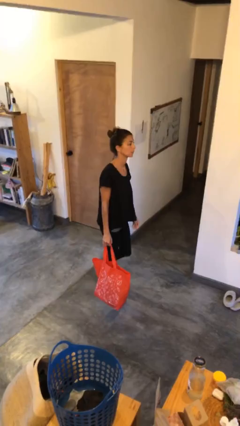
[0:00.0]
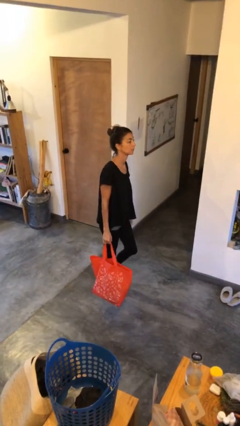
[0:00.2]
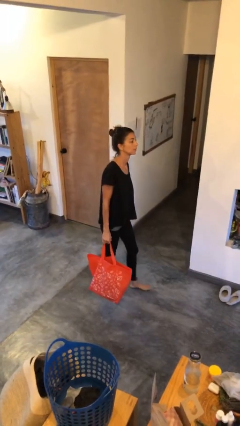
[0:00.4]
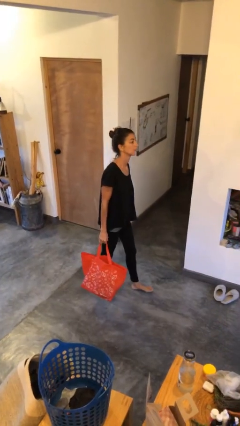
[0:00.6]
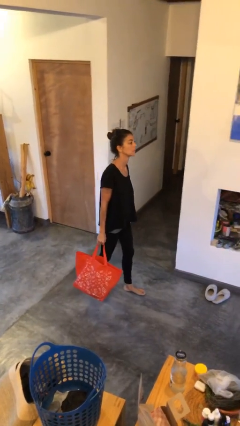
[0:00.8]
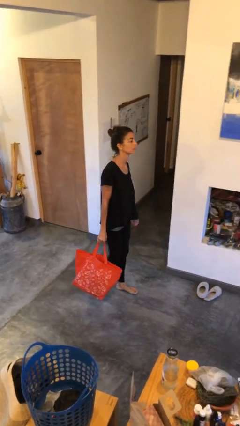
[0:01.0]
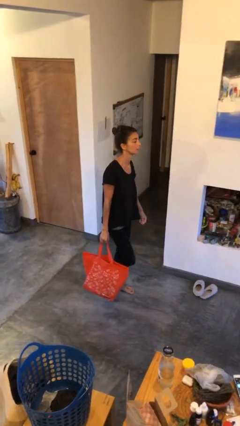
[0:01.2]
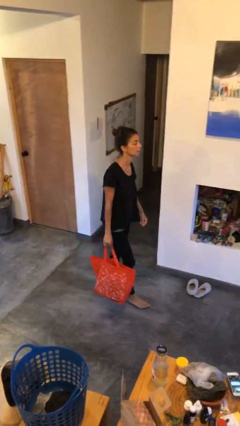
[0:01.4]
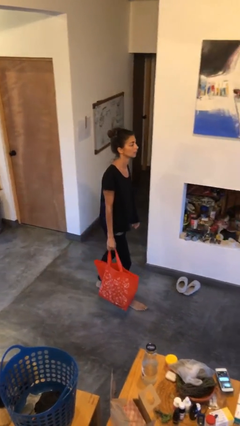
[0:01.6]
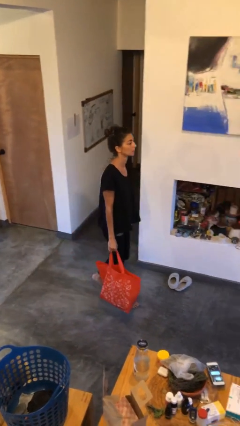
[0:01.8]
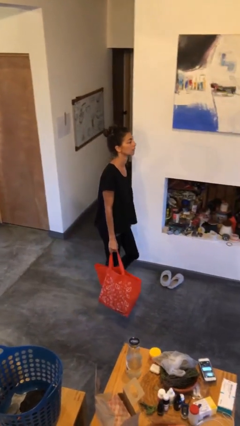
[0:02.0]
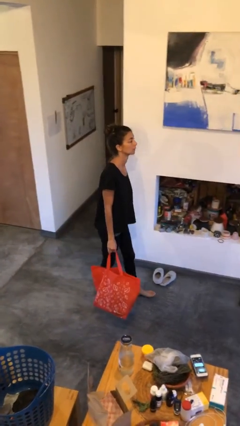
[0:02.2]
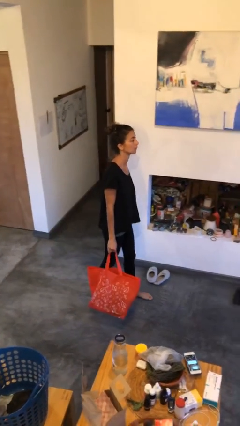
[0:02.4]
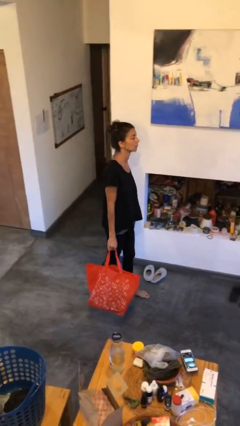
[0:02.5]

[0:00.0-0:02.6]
person carries groceries

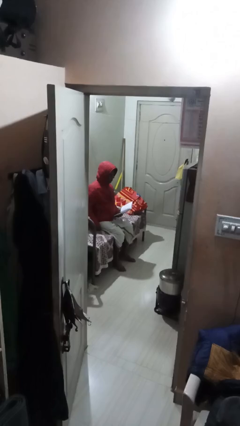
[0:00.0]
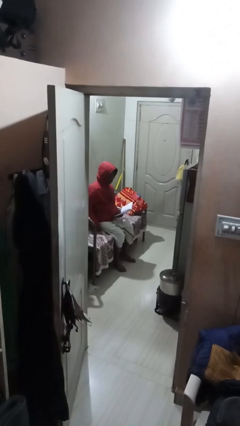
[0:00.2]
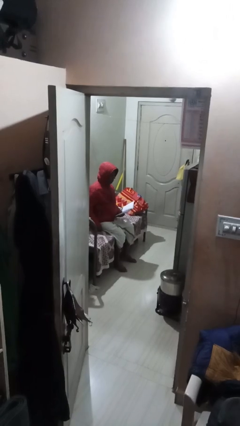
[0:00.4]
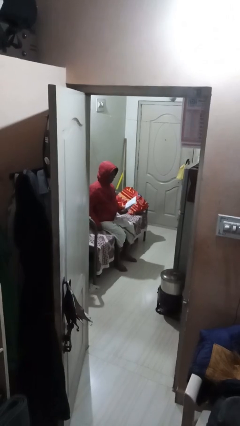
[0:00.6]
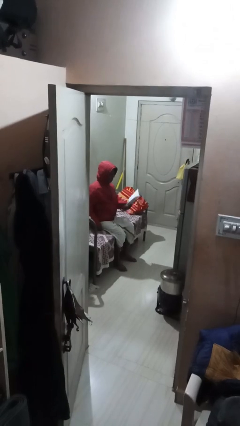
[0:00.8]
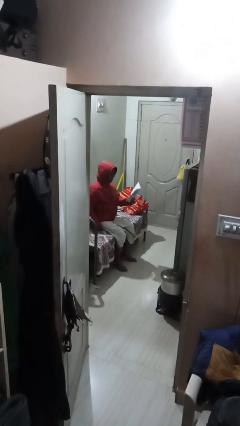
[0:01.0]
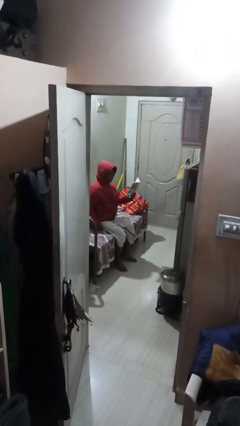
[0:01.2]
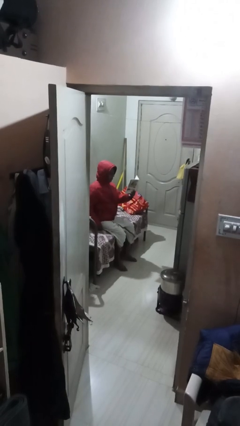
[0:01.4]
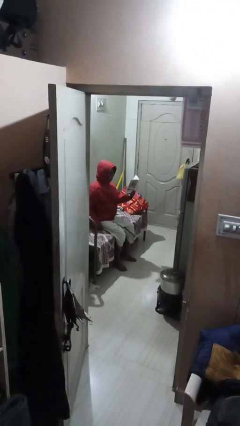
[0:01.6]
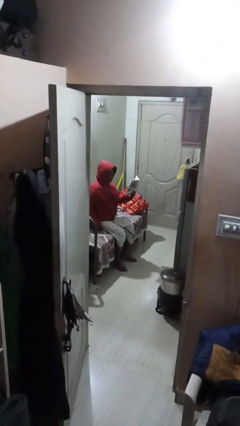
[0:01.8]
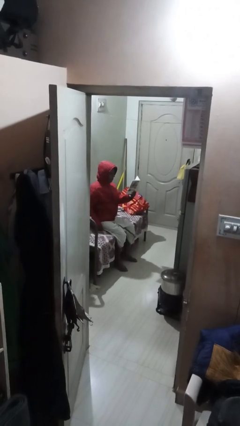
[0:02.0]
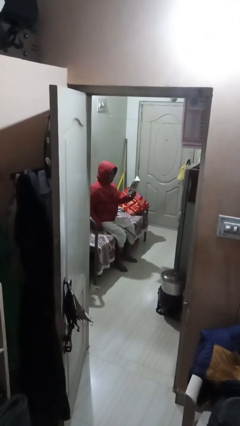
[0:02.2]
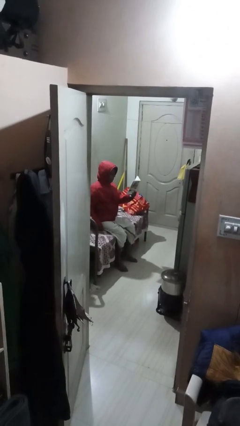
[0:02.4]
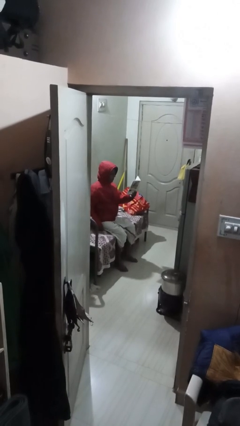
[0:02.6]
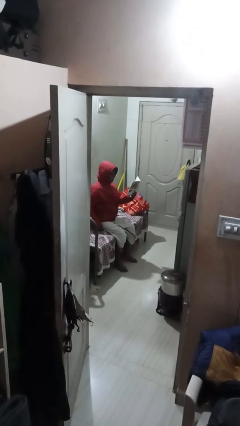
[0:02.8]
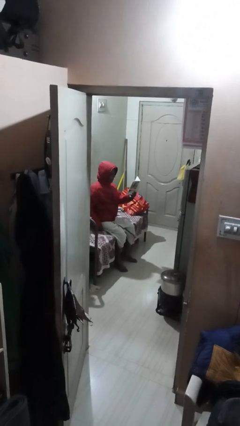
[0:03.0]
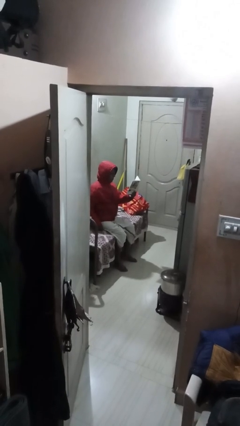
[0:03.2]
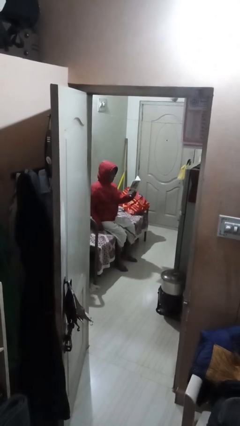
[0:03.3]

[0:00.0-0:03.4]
person reads document

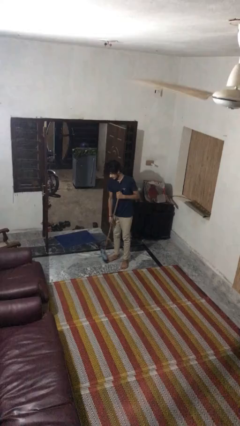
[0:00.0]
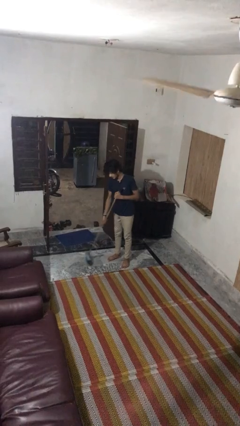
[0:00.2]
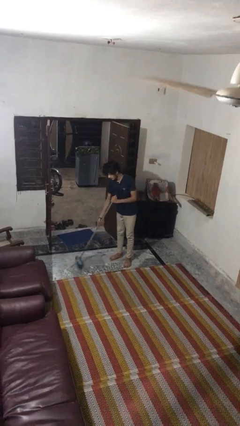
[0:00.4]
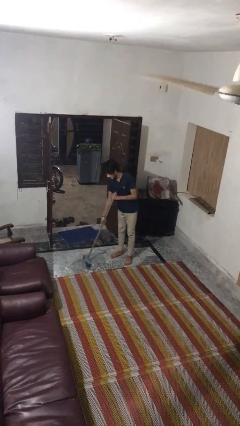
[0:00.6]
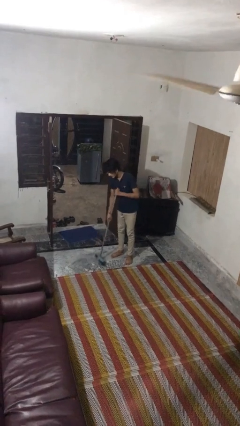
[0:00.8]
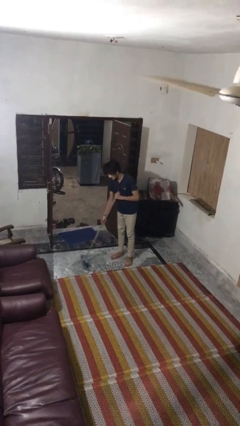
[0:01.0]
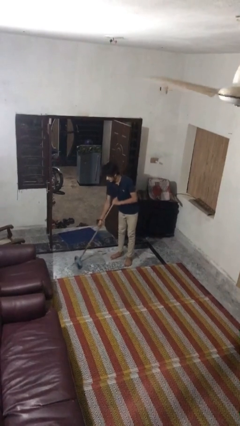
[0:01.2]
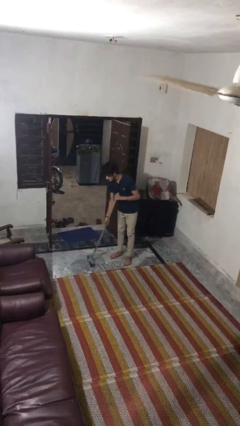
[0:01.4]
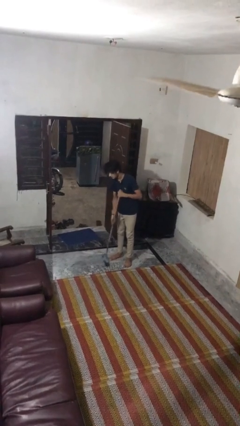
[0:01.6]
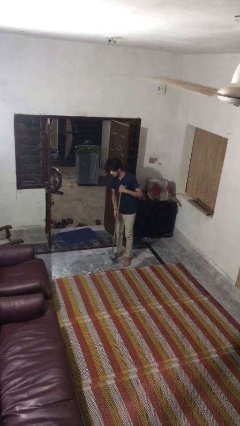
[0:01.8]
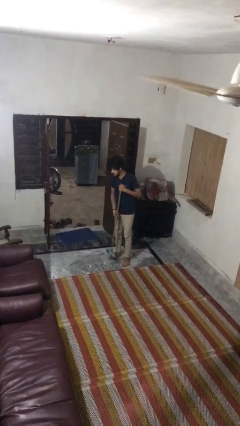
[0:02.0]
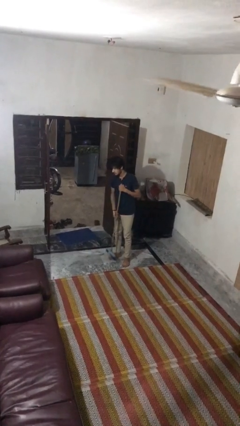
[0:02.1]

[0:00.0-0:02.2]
person sweeps floor

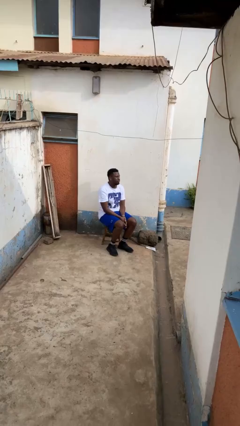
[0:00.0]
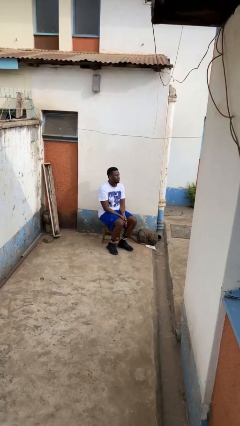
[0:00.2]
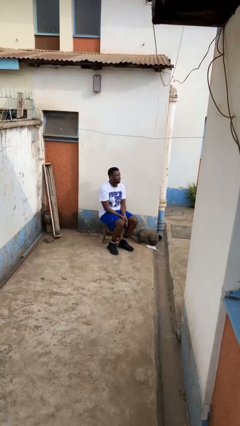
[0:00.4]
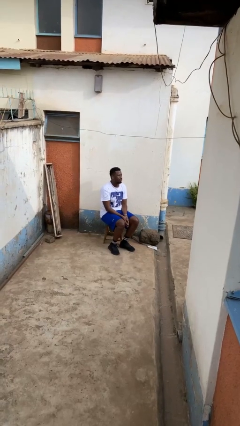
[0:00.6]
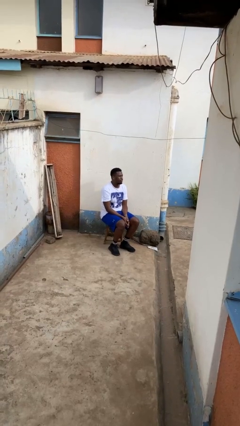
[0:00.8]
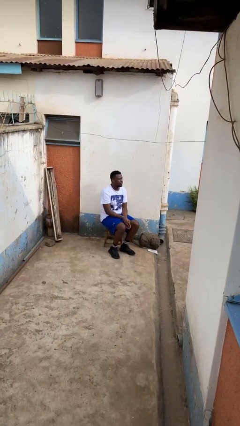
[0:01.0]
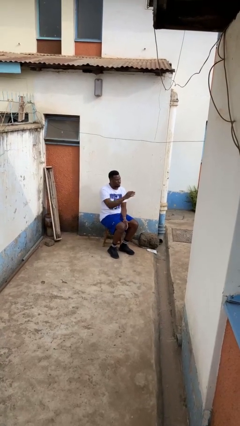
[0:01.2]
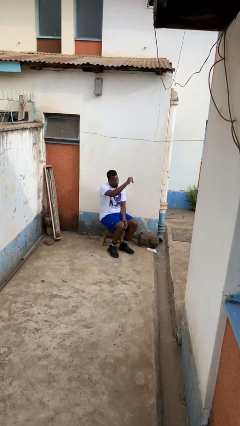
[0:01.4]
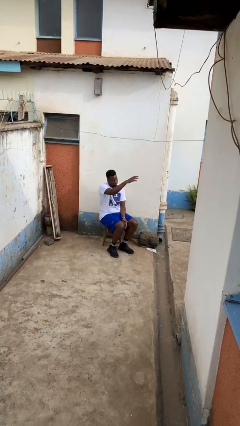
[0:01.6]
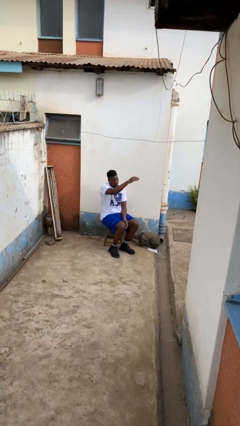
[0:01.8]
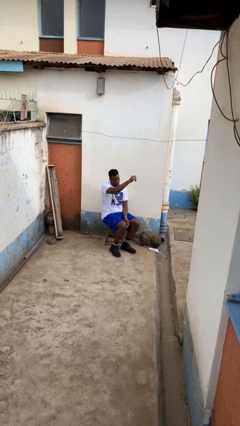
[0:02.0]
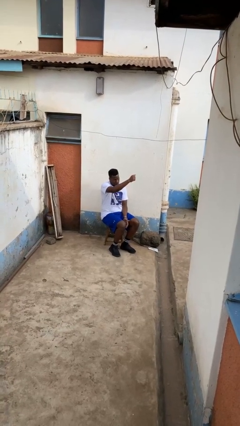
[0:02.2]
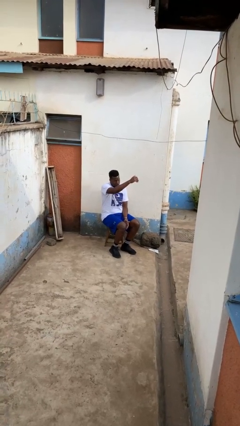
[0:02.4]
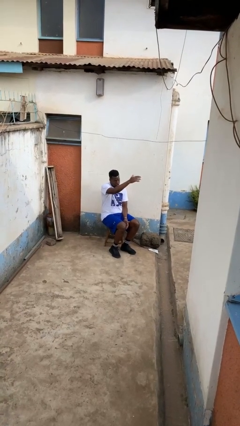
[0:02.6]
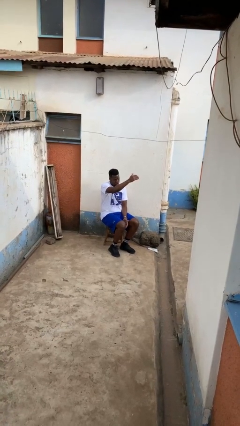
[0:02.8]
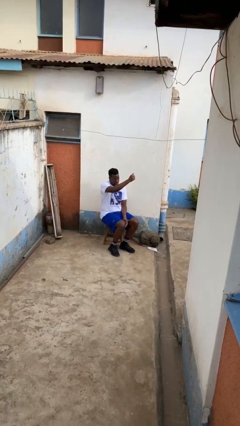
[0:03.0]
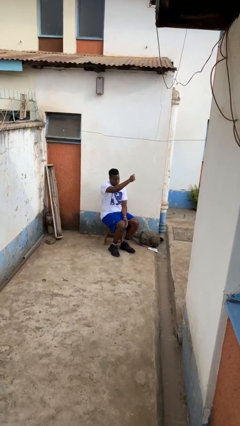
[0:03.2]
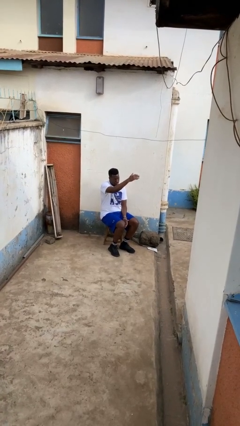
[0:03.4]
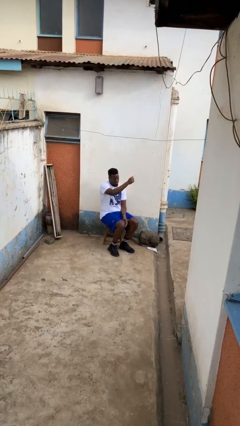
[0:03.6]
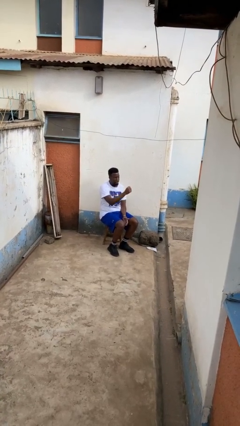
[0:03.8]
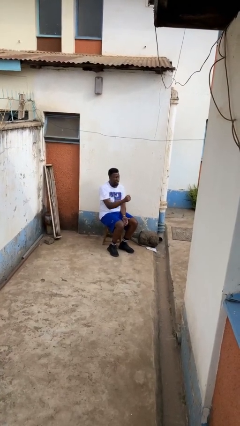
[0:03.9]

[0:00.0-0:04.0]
person gestures come here

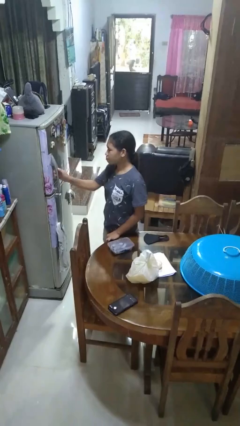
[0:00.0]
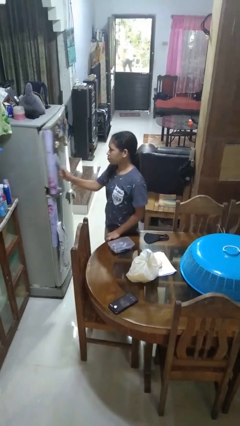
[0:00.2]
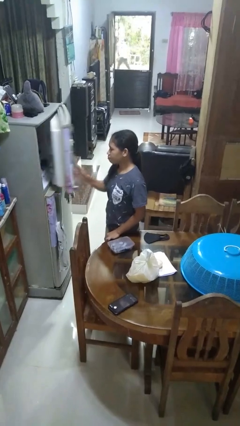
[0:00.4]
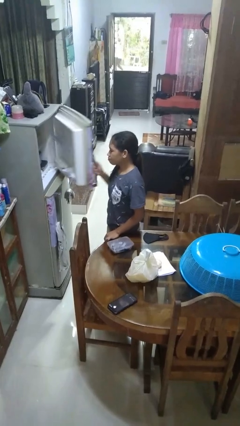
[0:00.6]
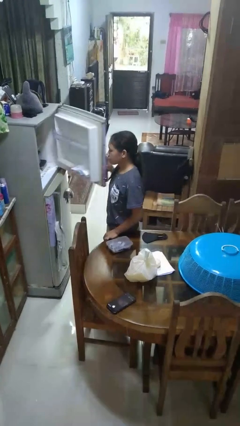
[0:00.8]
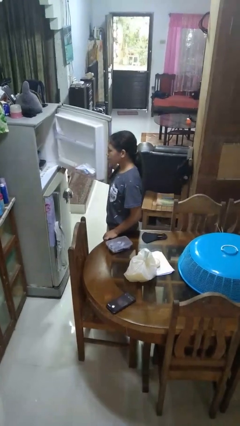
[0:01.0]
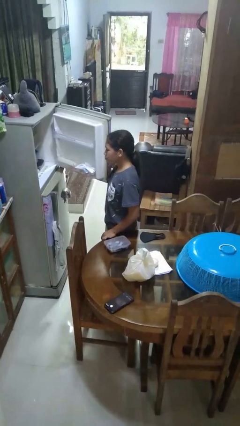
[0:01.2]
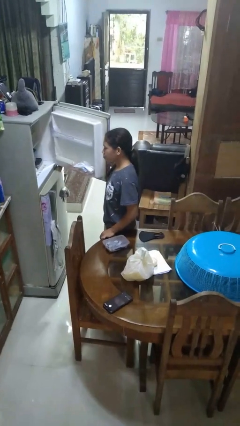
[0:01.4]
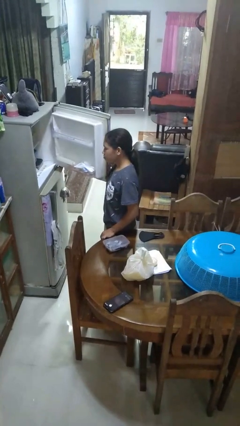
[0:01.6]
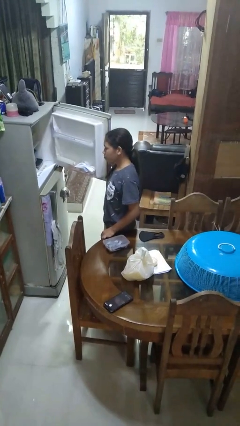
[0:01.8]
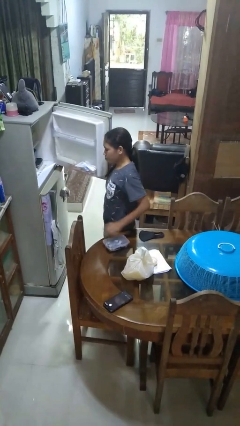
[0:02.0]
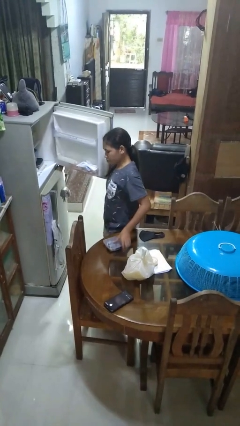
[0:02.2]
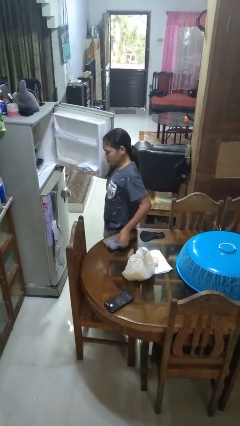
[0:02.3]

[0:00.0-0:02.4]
person opens refrigerator

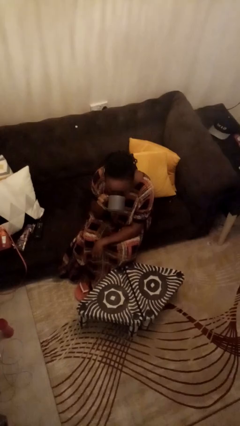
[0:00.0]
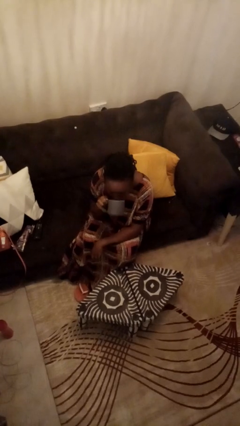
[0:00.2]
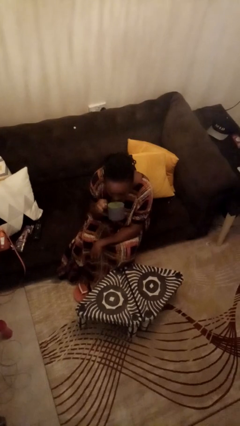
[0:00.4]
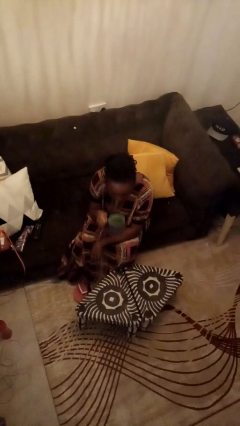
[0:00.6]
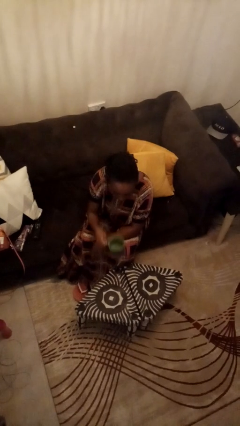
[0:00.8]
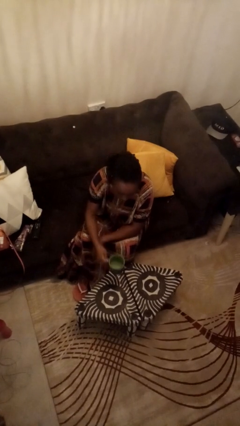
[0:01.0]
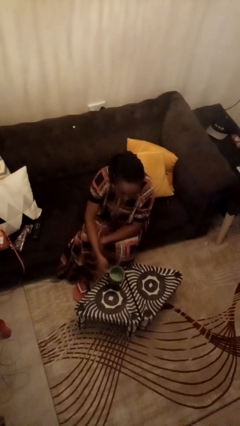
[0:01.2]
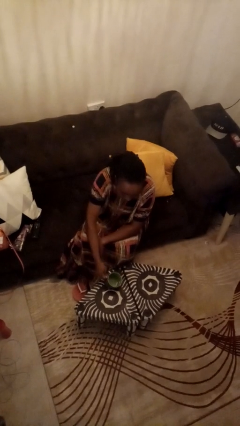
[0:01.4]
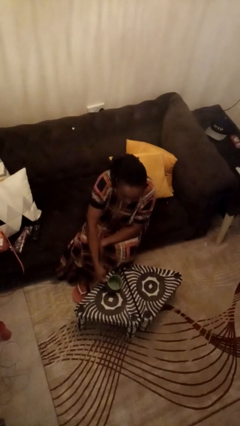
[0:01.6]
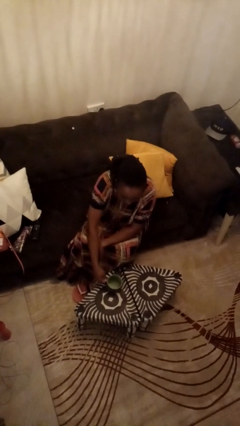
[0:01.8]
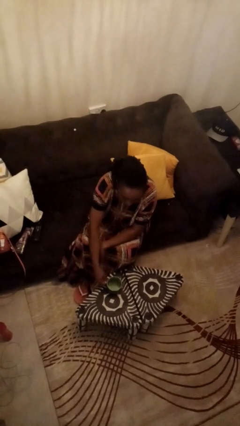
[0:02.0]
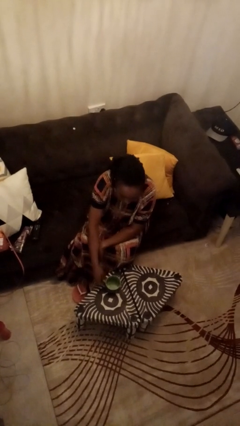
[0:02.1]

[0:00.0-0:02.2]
person puts down object on table

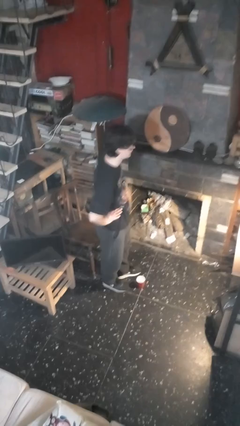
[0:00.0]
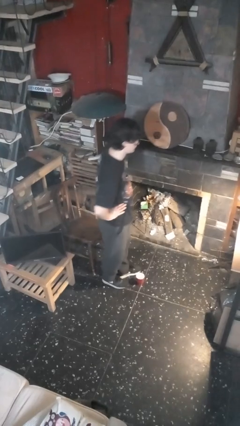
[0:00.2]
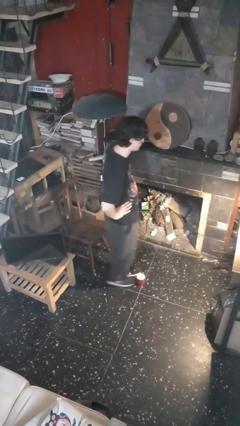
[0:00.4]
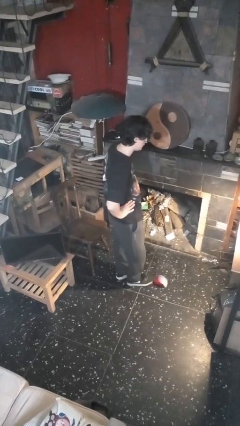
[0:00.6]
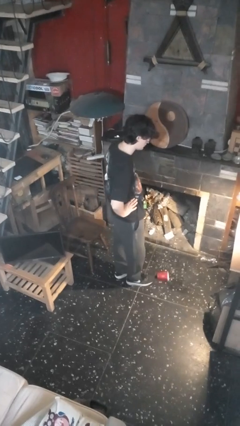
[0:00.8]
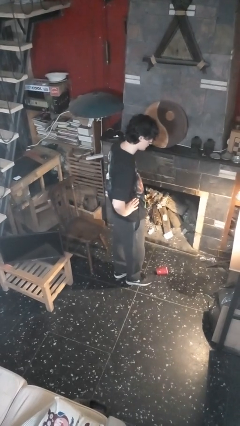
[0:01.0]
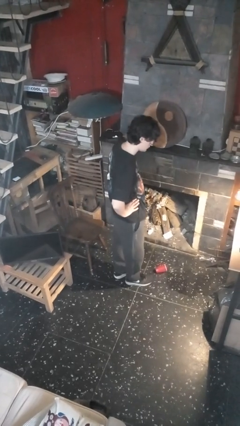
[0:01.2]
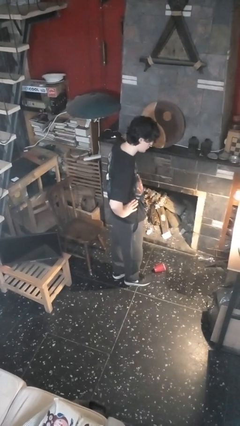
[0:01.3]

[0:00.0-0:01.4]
person spills on floor
